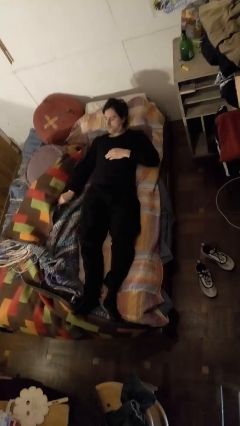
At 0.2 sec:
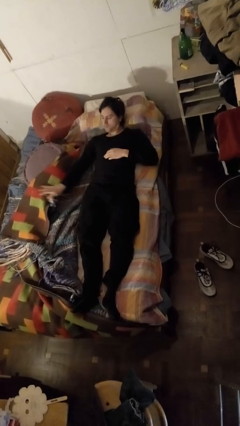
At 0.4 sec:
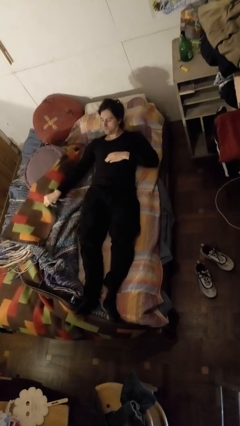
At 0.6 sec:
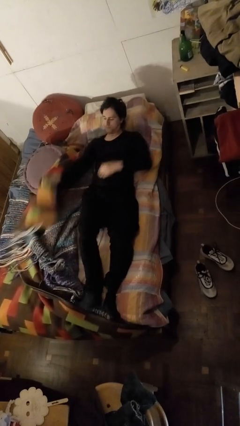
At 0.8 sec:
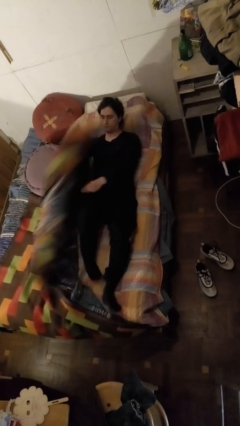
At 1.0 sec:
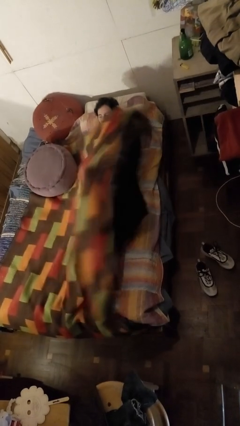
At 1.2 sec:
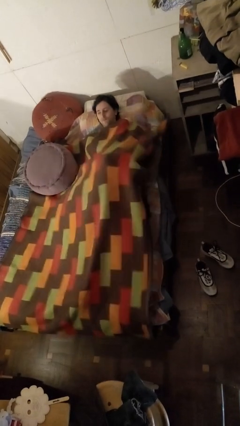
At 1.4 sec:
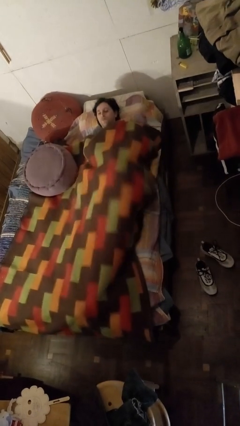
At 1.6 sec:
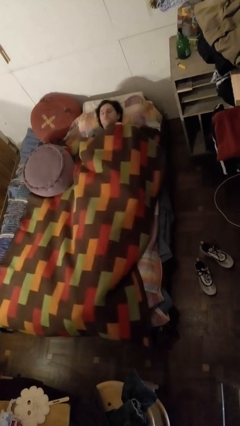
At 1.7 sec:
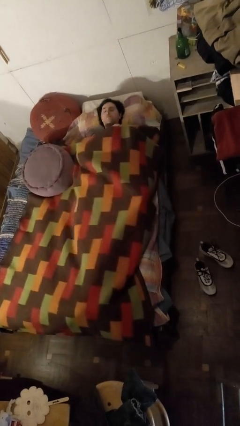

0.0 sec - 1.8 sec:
person covers with bedsheets

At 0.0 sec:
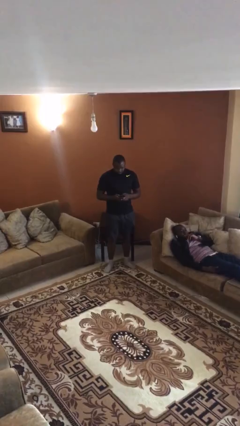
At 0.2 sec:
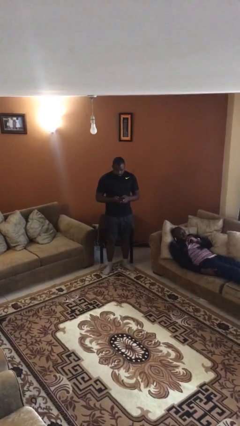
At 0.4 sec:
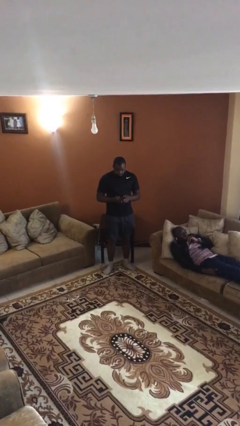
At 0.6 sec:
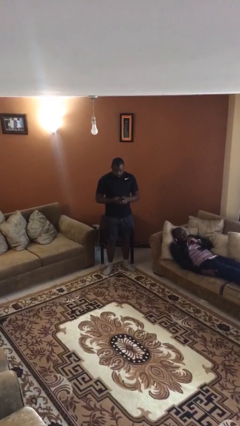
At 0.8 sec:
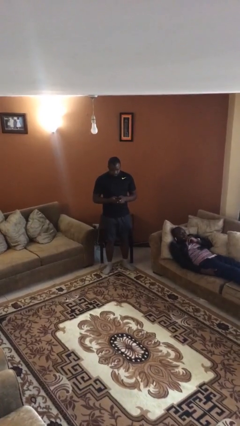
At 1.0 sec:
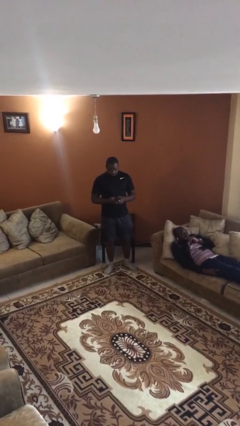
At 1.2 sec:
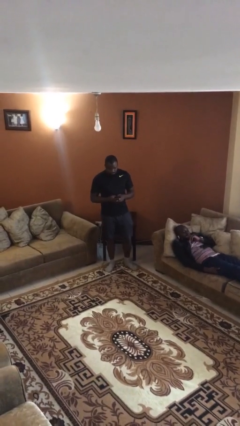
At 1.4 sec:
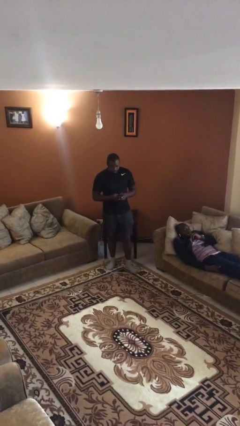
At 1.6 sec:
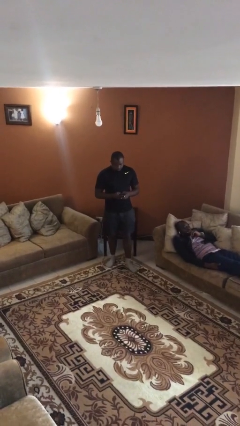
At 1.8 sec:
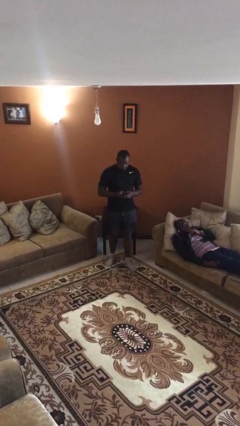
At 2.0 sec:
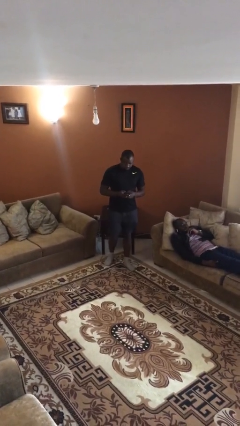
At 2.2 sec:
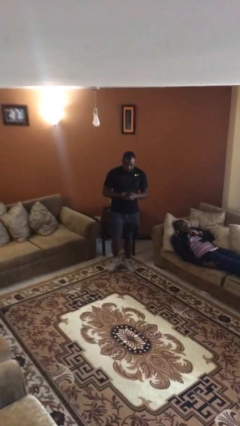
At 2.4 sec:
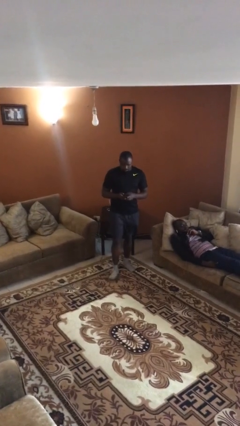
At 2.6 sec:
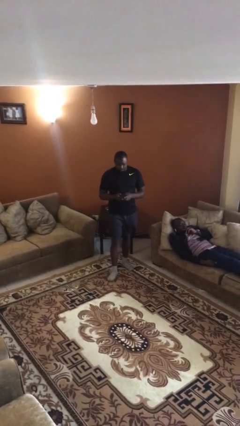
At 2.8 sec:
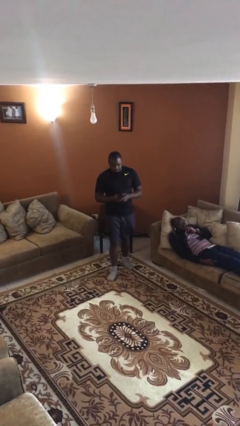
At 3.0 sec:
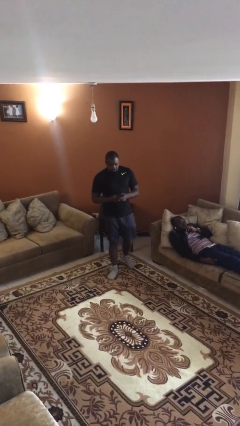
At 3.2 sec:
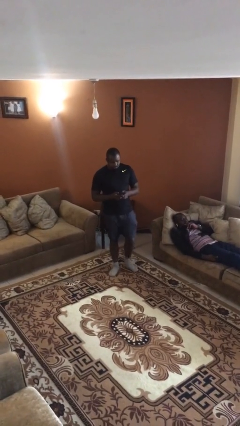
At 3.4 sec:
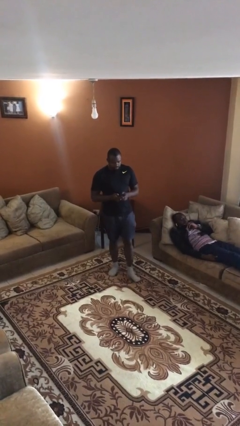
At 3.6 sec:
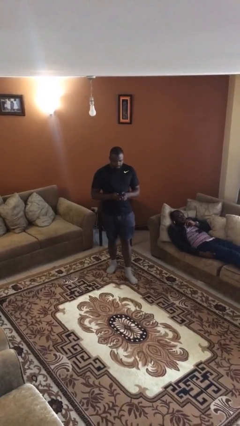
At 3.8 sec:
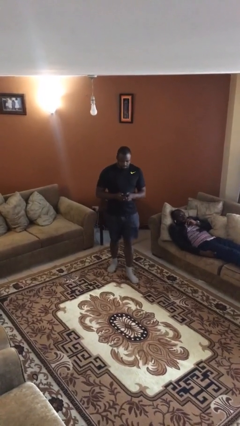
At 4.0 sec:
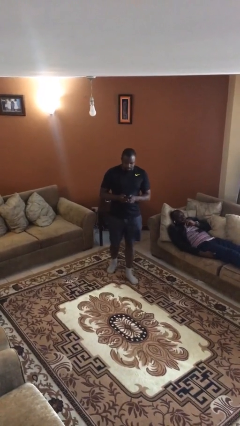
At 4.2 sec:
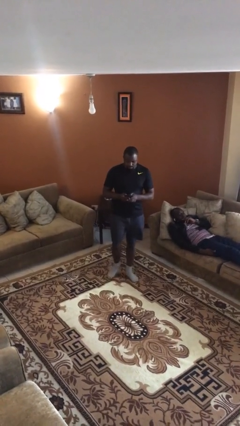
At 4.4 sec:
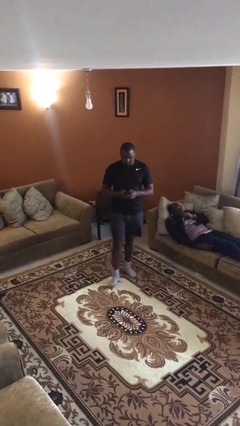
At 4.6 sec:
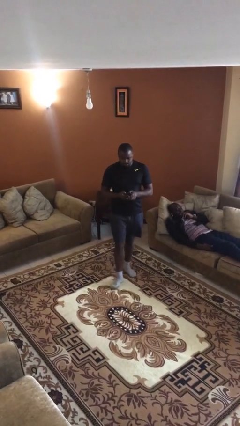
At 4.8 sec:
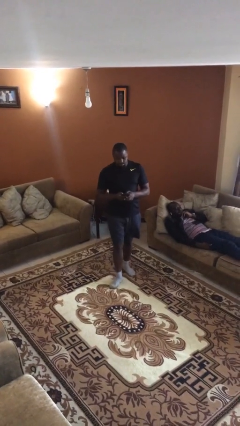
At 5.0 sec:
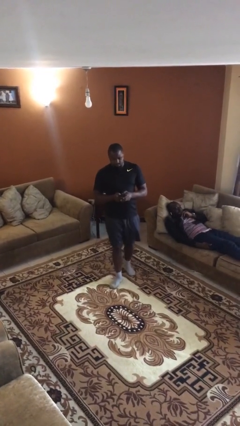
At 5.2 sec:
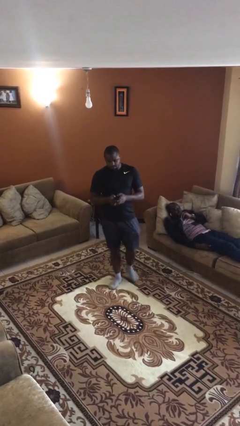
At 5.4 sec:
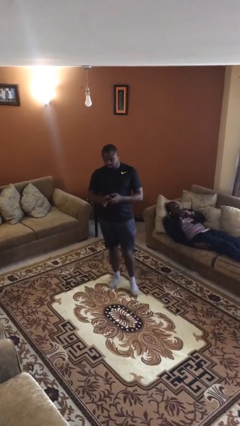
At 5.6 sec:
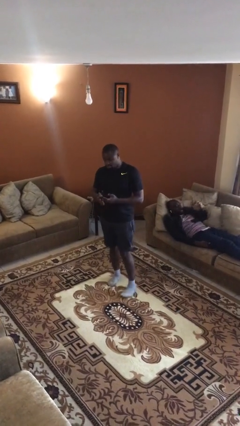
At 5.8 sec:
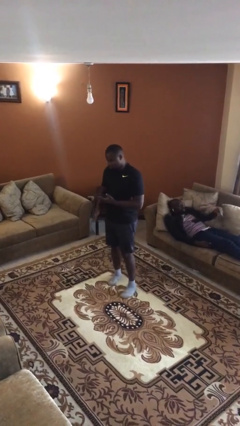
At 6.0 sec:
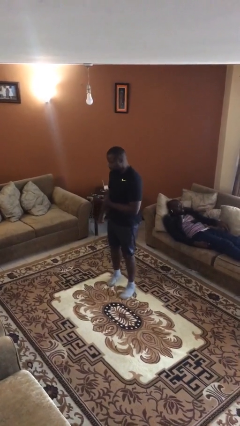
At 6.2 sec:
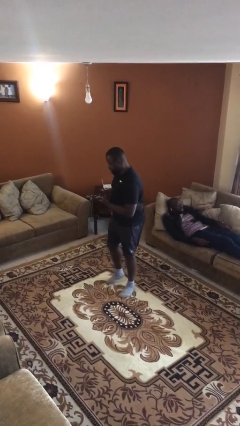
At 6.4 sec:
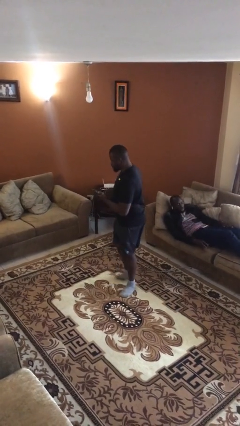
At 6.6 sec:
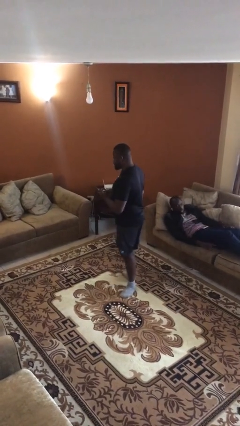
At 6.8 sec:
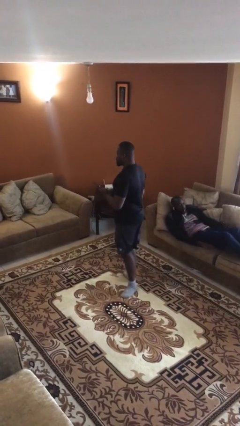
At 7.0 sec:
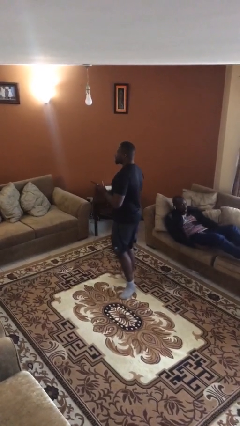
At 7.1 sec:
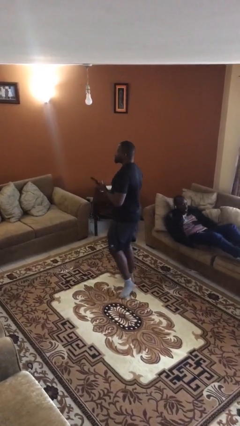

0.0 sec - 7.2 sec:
person texts on phone

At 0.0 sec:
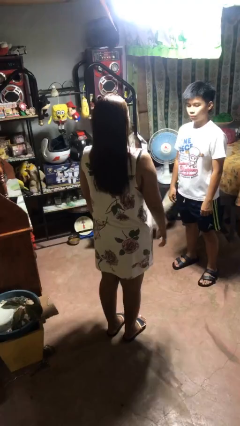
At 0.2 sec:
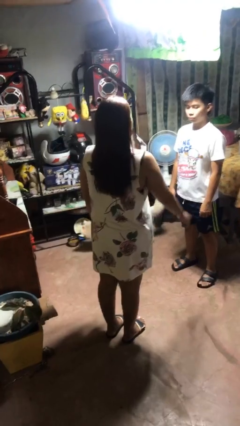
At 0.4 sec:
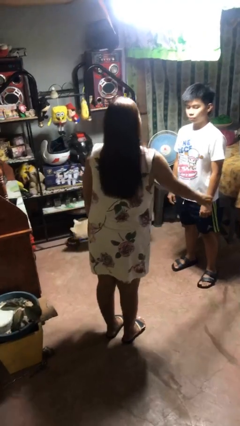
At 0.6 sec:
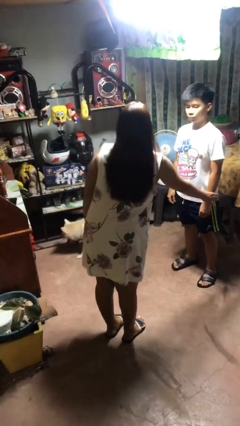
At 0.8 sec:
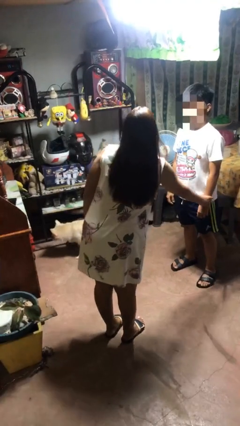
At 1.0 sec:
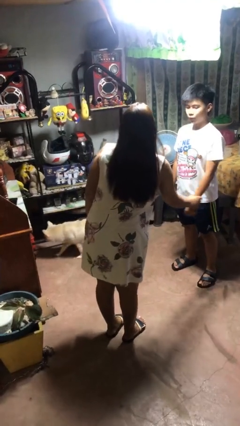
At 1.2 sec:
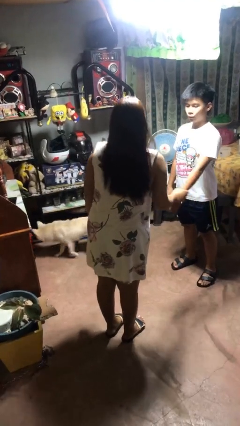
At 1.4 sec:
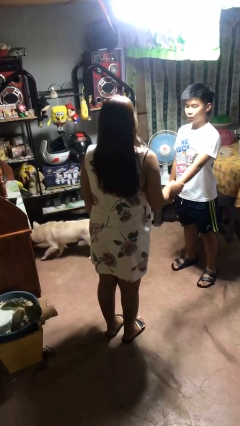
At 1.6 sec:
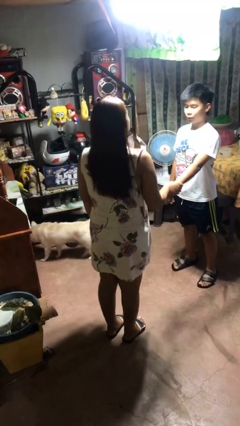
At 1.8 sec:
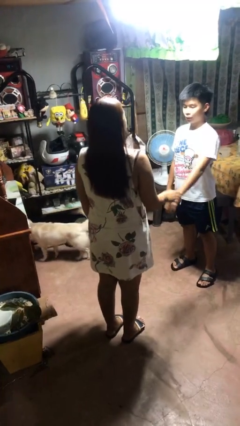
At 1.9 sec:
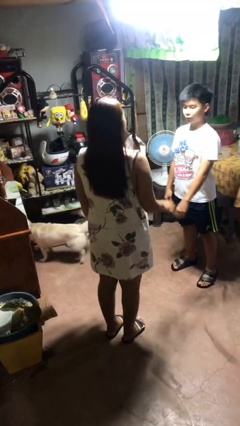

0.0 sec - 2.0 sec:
person grabs person by forearm

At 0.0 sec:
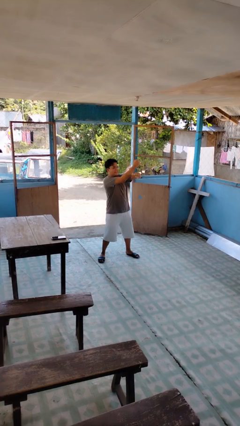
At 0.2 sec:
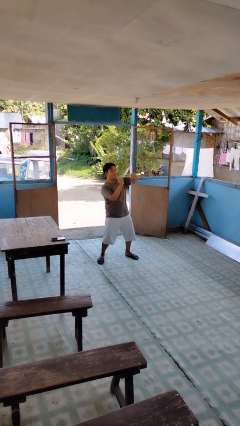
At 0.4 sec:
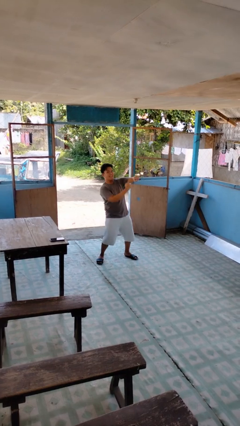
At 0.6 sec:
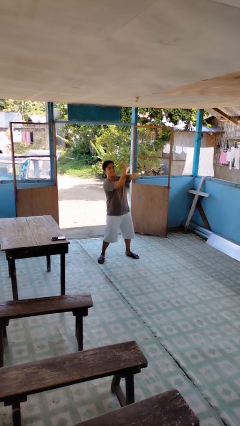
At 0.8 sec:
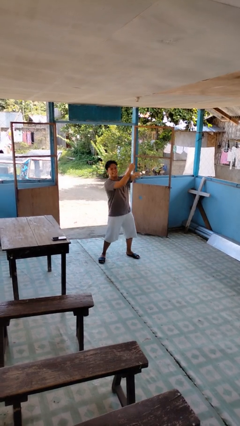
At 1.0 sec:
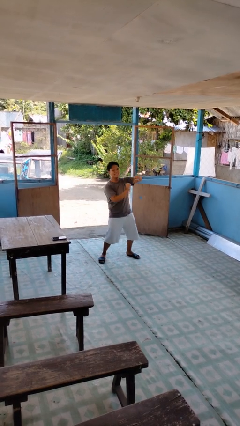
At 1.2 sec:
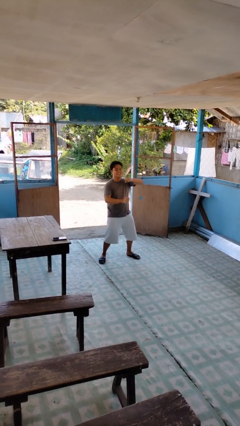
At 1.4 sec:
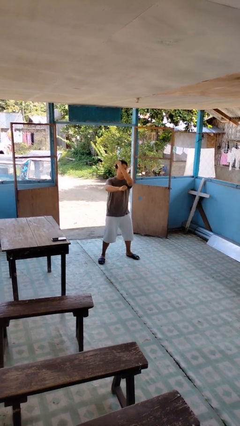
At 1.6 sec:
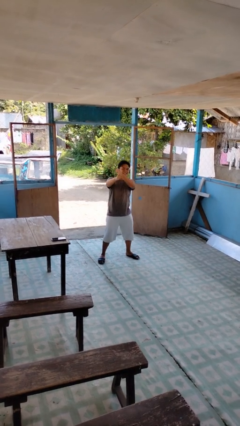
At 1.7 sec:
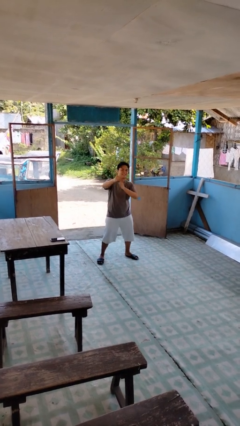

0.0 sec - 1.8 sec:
person dances in place

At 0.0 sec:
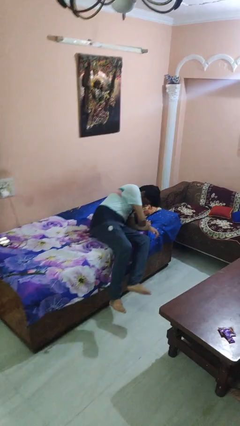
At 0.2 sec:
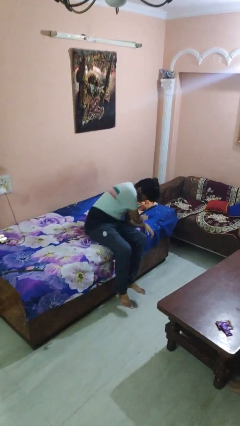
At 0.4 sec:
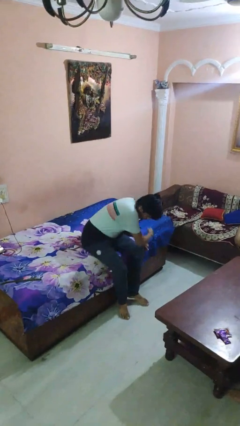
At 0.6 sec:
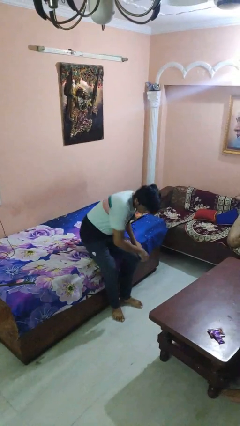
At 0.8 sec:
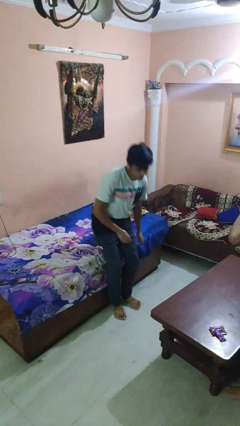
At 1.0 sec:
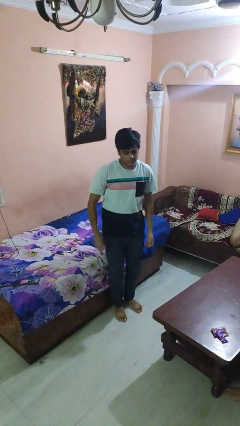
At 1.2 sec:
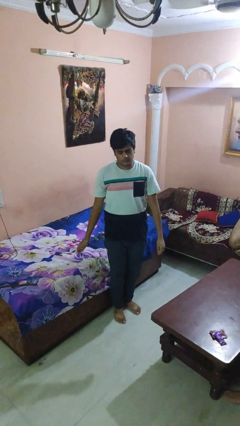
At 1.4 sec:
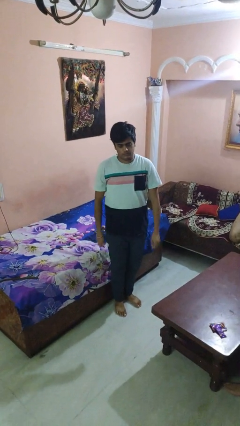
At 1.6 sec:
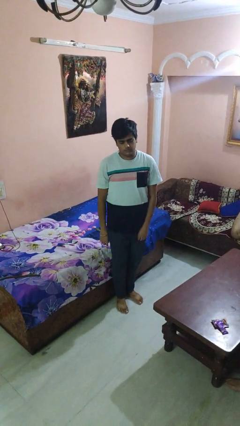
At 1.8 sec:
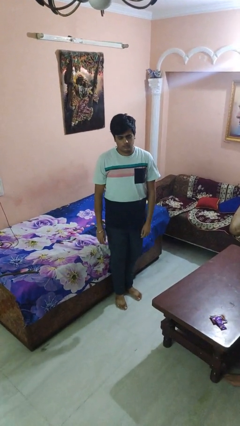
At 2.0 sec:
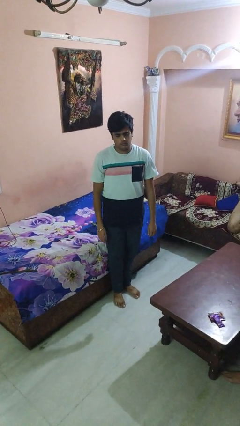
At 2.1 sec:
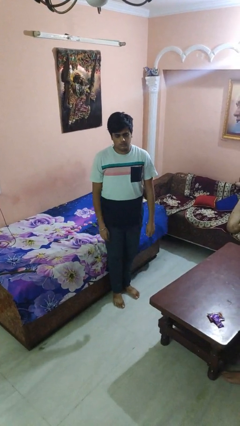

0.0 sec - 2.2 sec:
person stands up

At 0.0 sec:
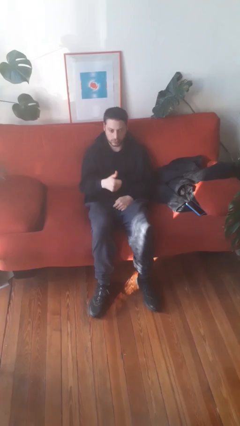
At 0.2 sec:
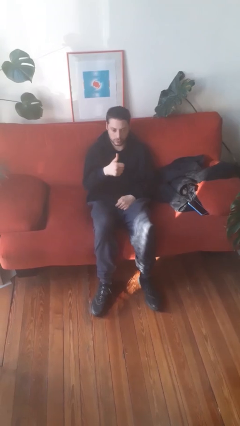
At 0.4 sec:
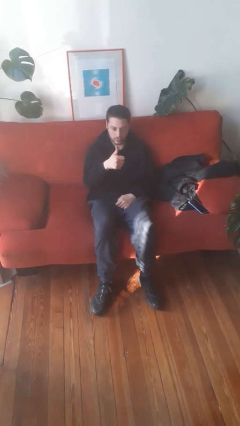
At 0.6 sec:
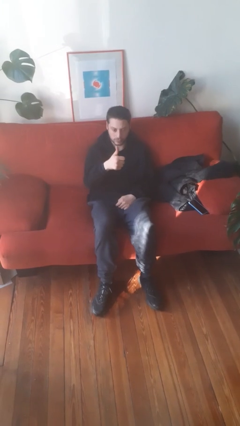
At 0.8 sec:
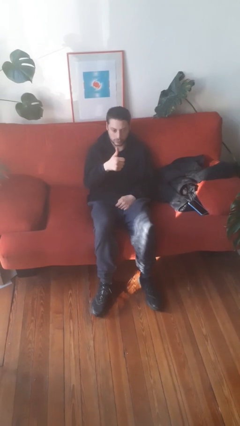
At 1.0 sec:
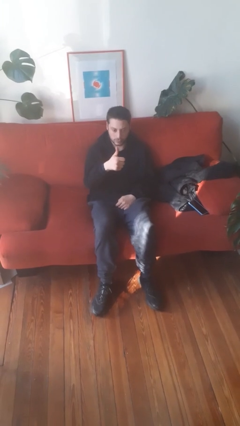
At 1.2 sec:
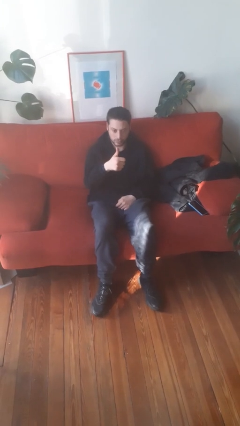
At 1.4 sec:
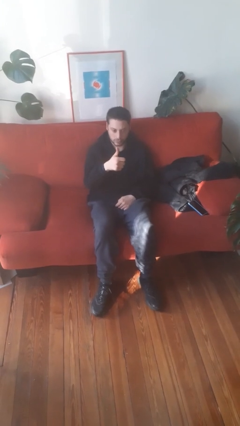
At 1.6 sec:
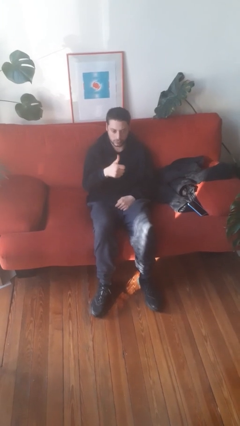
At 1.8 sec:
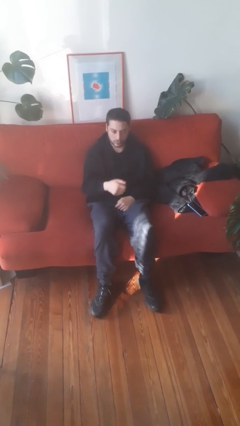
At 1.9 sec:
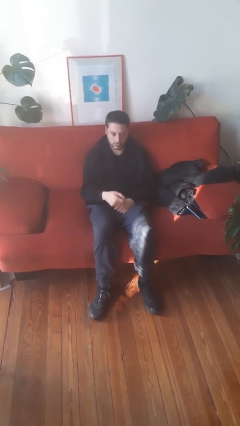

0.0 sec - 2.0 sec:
person gestures thumbs up

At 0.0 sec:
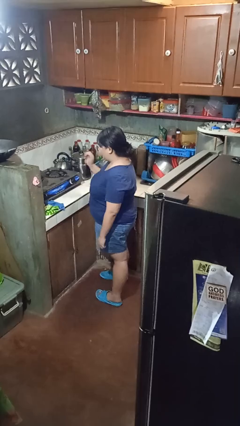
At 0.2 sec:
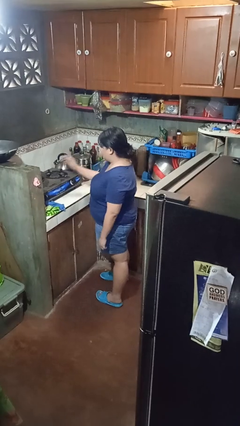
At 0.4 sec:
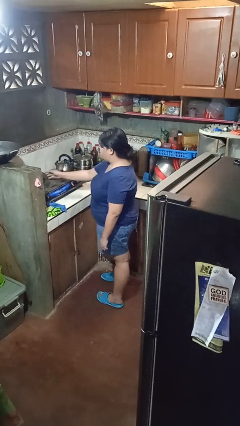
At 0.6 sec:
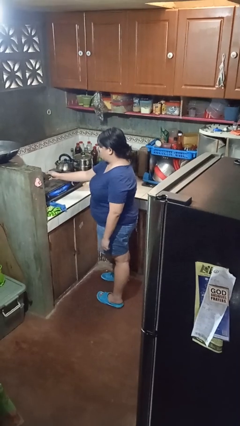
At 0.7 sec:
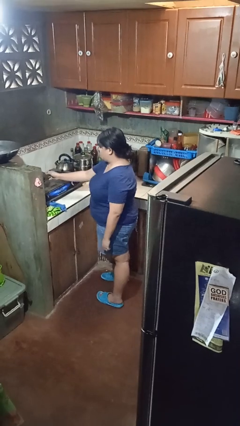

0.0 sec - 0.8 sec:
person burns hand
